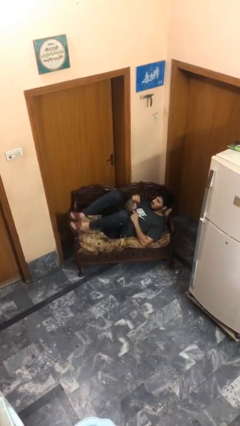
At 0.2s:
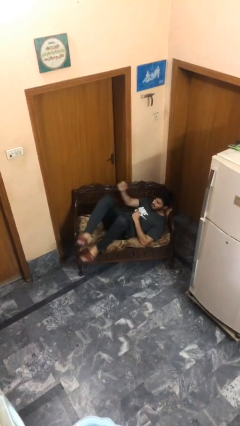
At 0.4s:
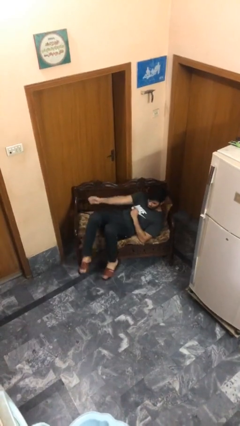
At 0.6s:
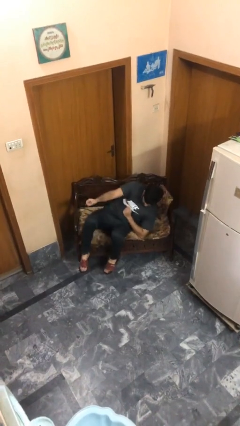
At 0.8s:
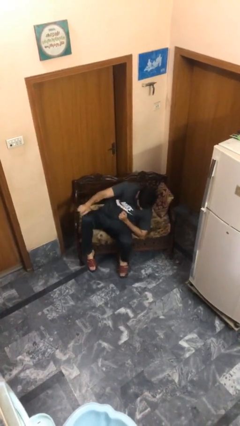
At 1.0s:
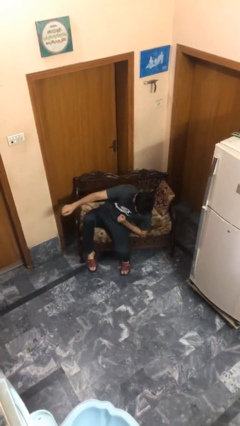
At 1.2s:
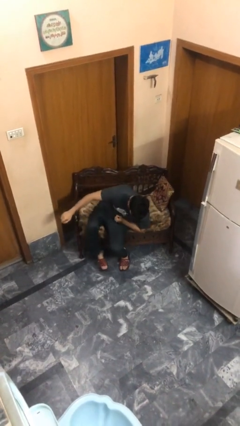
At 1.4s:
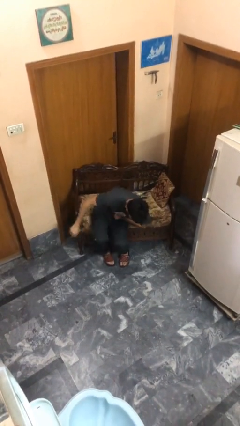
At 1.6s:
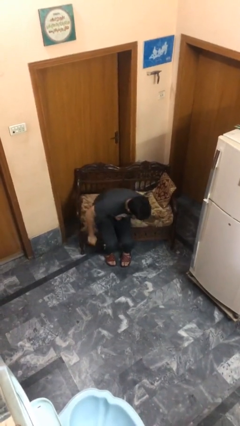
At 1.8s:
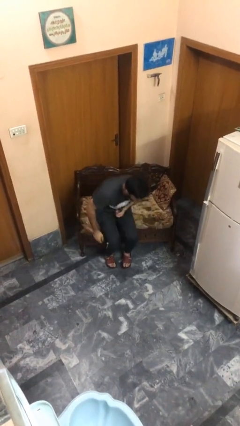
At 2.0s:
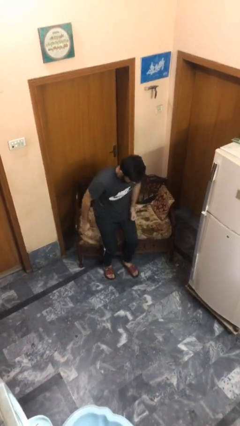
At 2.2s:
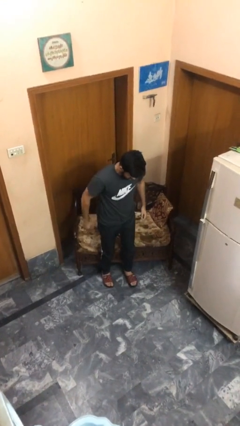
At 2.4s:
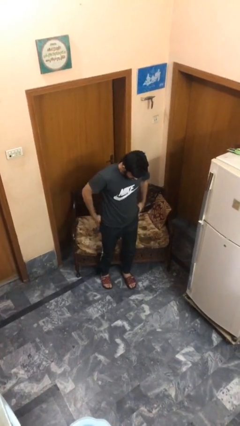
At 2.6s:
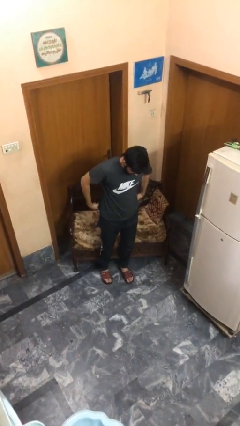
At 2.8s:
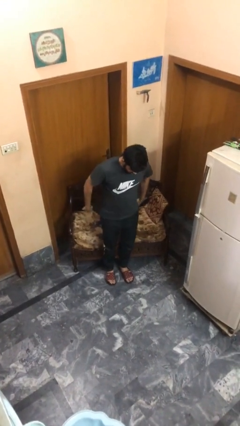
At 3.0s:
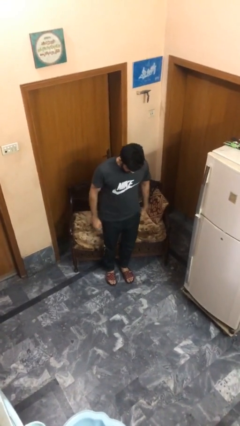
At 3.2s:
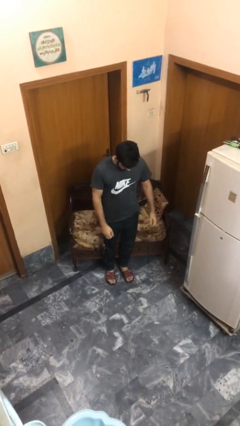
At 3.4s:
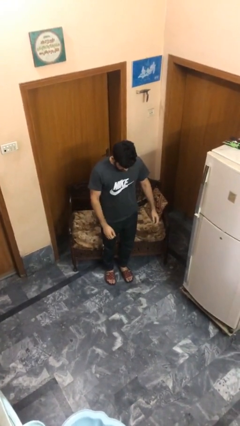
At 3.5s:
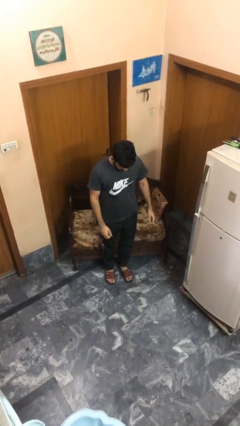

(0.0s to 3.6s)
person stands up

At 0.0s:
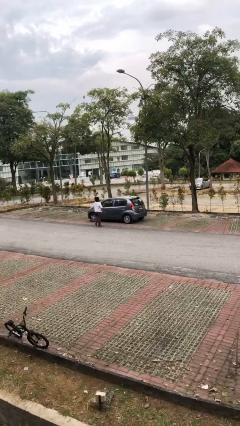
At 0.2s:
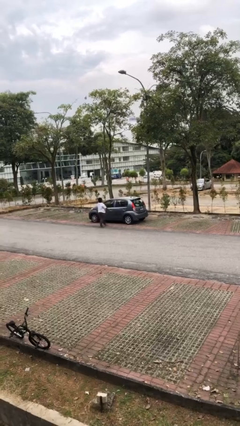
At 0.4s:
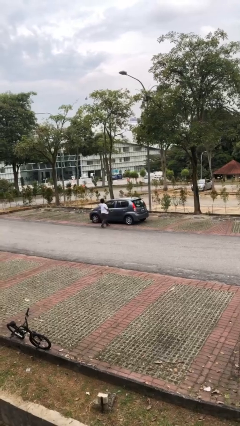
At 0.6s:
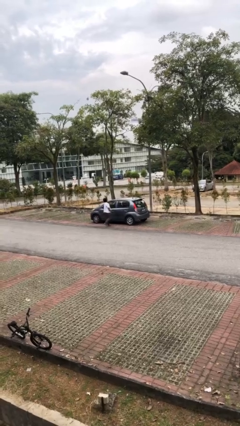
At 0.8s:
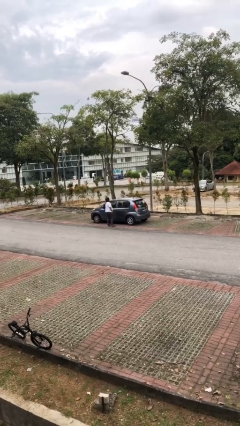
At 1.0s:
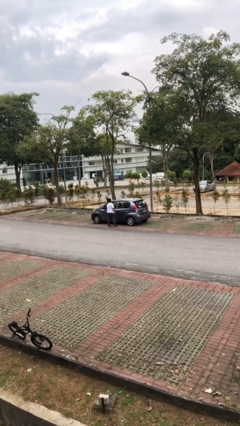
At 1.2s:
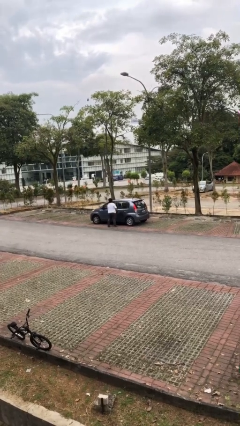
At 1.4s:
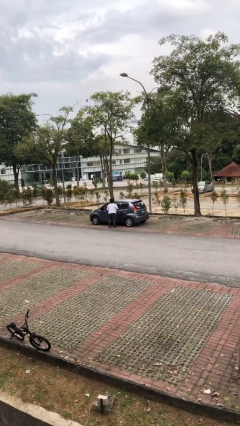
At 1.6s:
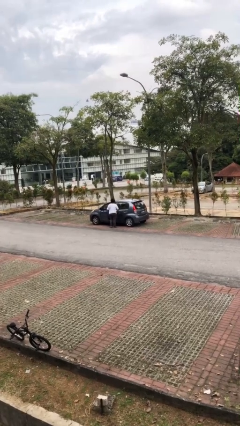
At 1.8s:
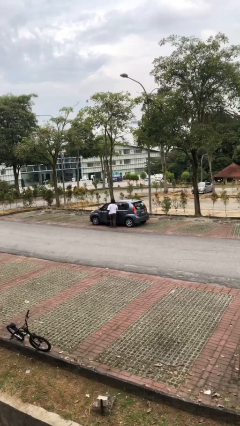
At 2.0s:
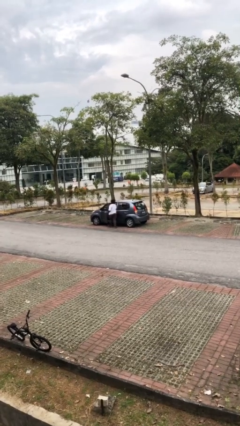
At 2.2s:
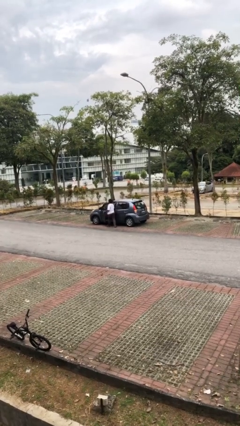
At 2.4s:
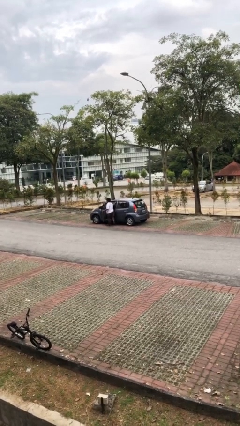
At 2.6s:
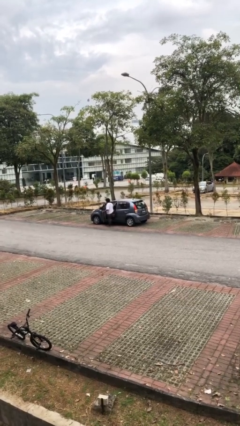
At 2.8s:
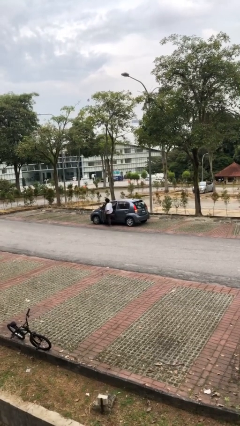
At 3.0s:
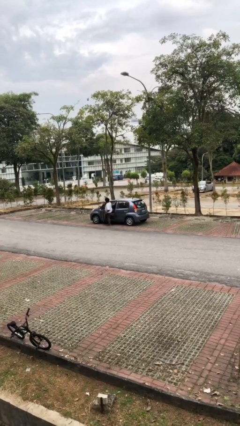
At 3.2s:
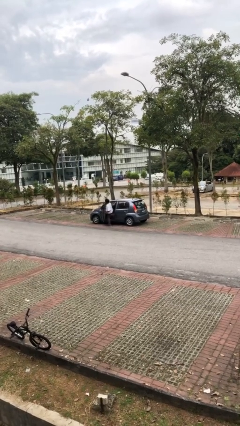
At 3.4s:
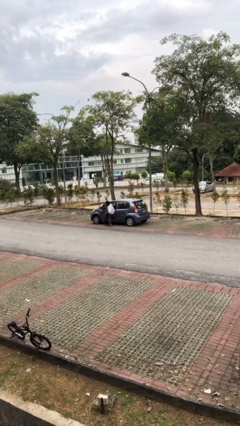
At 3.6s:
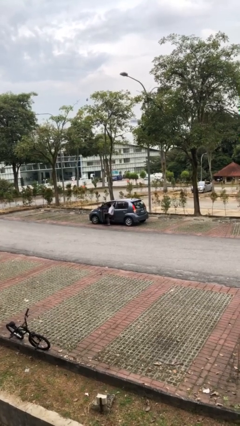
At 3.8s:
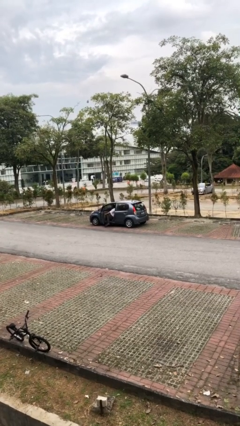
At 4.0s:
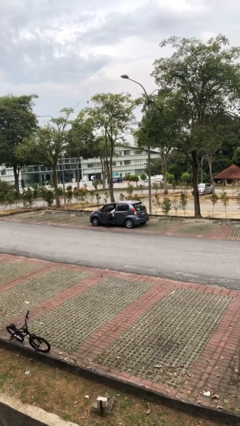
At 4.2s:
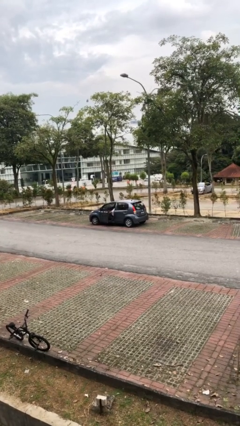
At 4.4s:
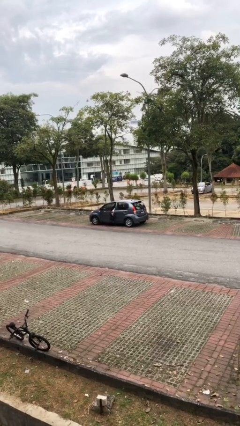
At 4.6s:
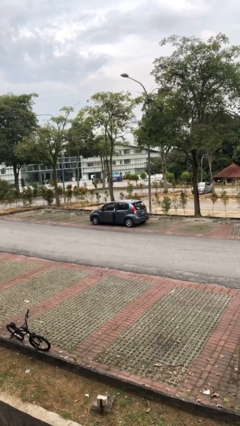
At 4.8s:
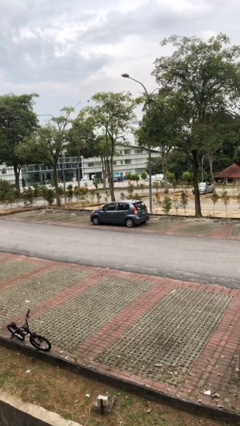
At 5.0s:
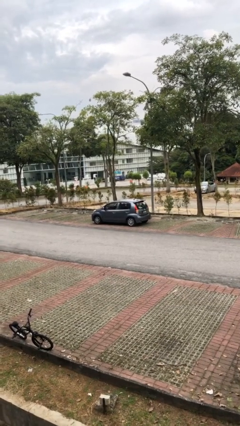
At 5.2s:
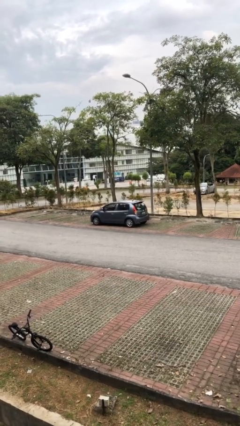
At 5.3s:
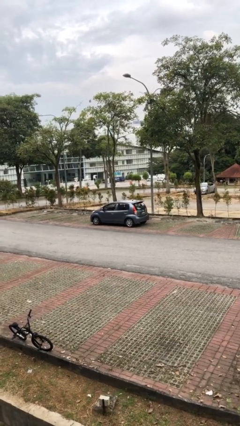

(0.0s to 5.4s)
car picks up person

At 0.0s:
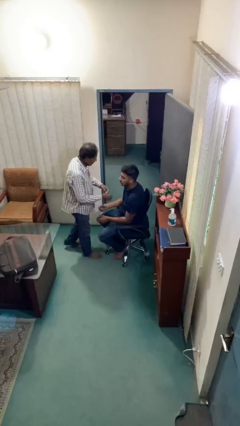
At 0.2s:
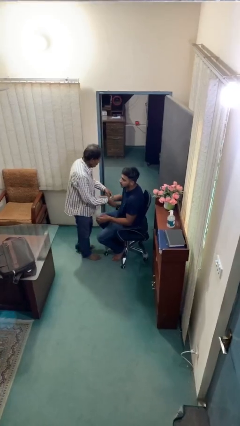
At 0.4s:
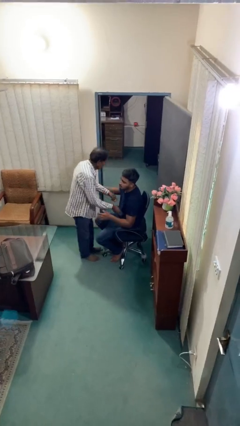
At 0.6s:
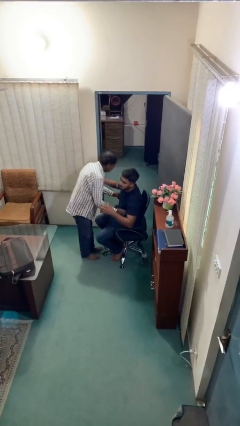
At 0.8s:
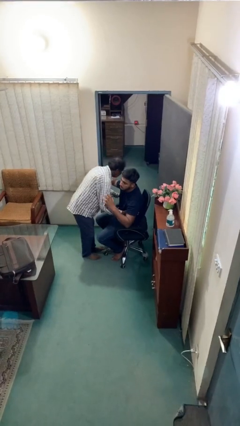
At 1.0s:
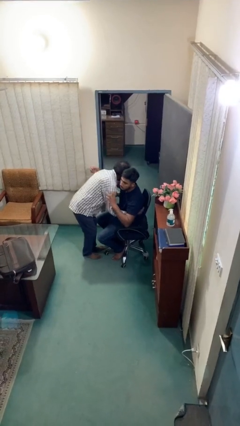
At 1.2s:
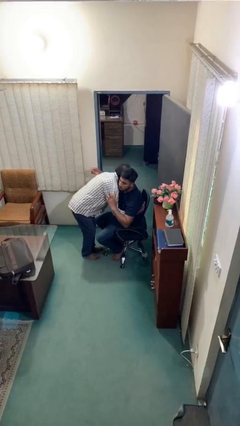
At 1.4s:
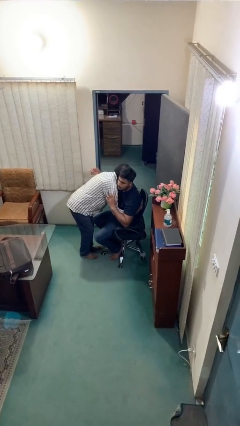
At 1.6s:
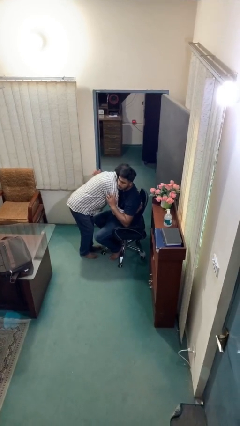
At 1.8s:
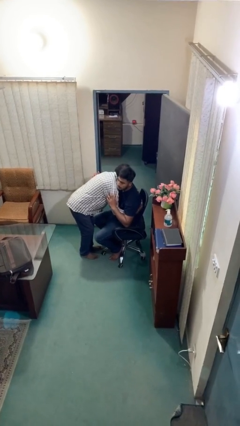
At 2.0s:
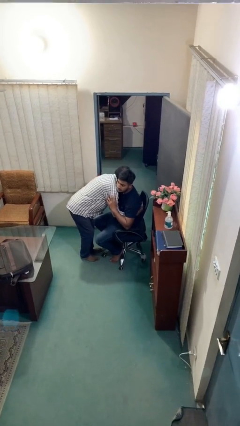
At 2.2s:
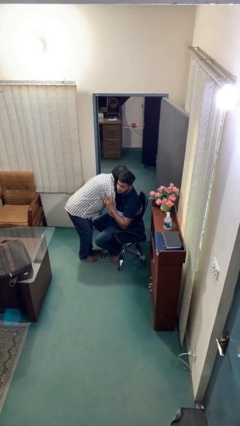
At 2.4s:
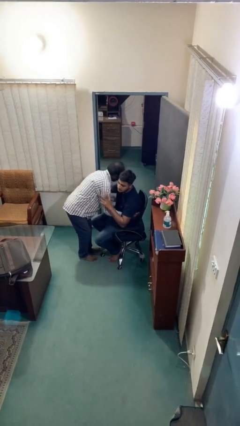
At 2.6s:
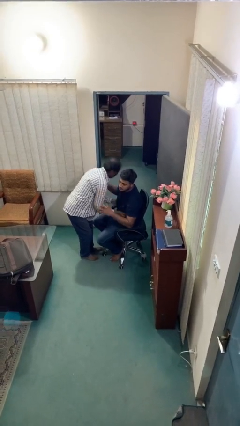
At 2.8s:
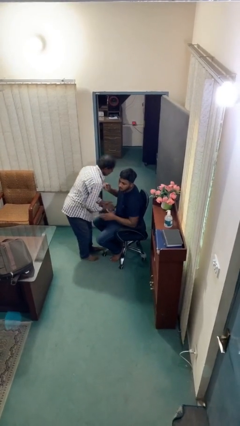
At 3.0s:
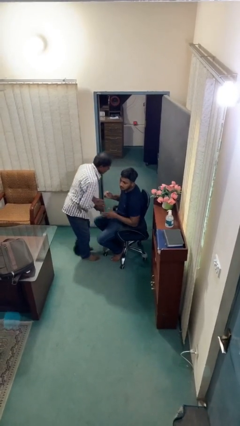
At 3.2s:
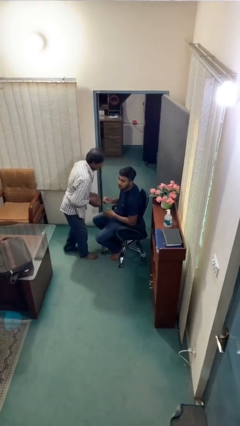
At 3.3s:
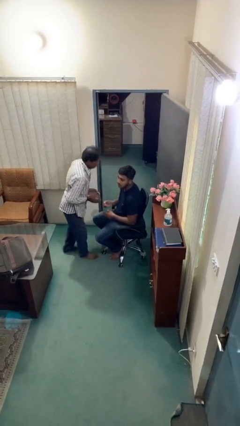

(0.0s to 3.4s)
person embraces person

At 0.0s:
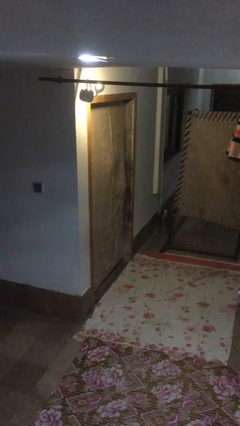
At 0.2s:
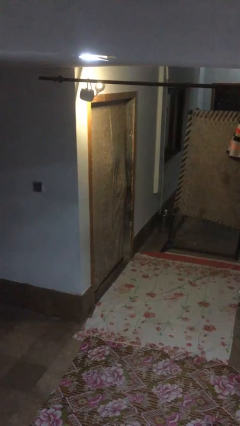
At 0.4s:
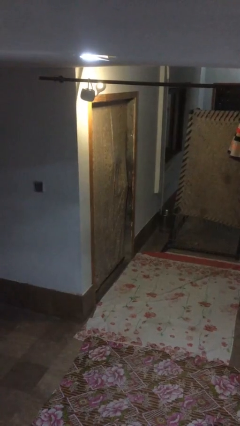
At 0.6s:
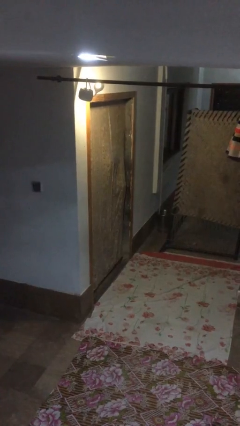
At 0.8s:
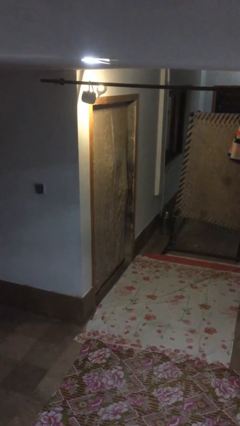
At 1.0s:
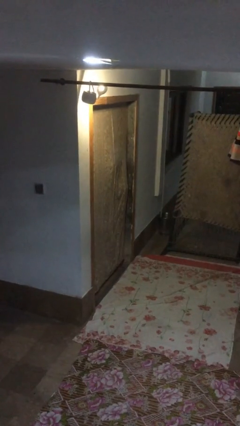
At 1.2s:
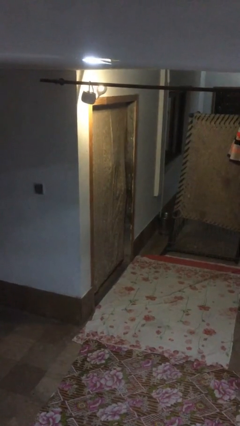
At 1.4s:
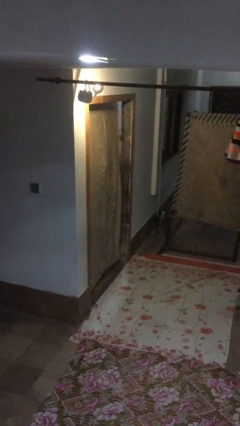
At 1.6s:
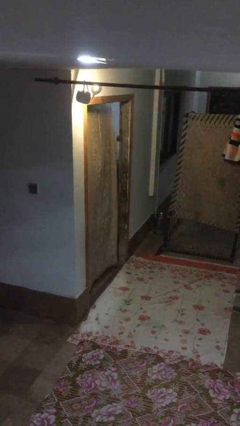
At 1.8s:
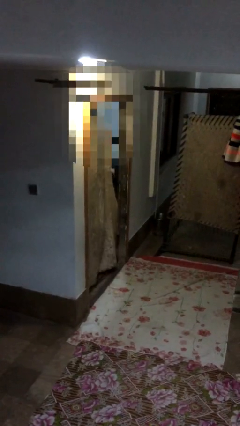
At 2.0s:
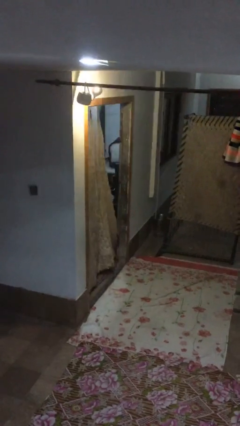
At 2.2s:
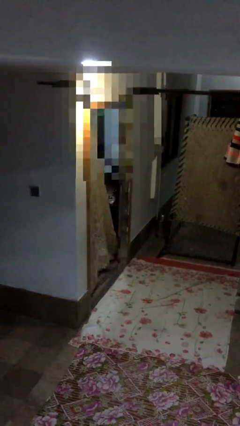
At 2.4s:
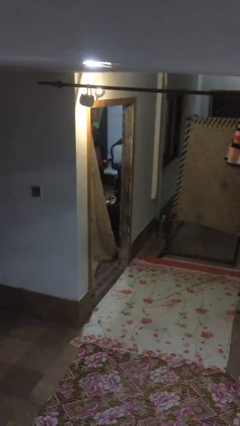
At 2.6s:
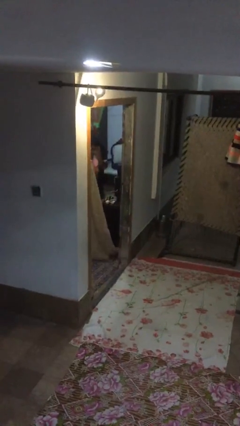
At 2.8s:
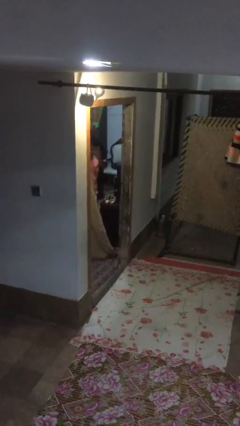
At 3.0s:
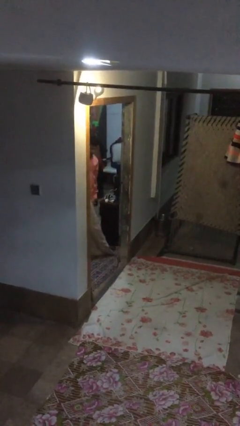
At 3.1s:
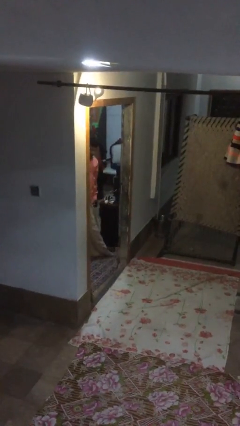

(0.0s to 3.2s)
person opens facility door

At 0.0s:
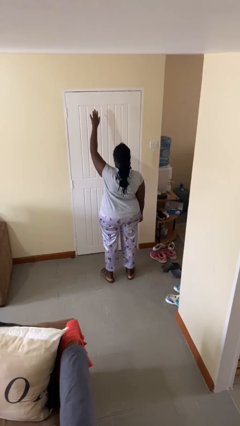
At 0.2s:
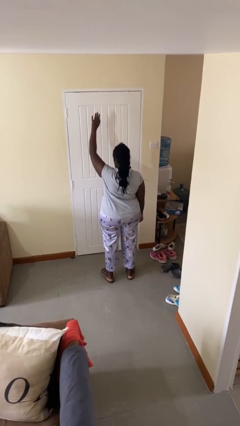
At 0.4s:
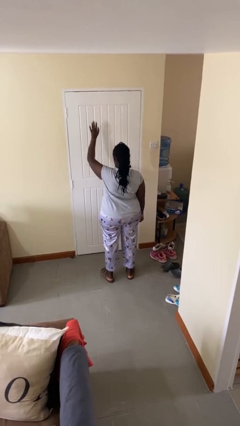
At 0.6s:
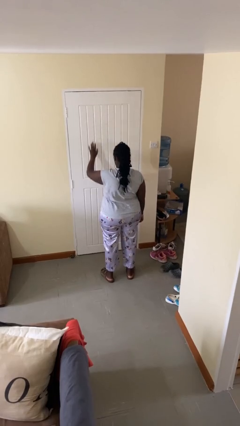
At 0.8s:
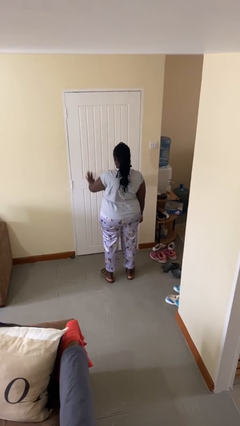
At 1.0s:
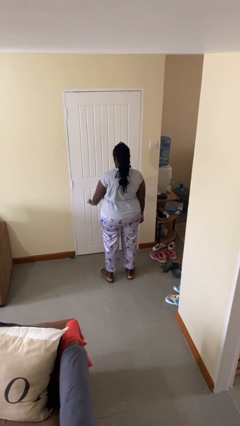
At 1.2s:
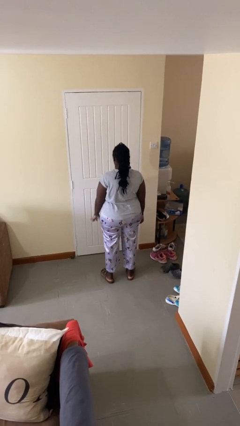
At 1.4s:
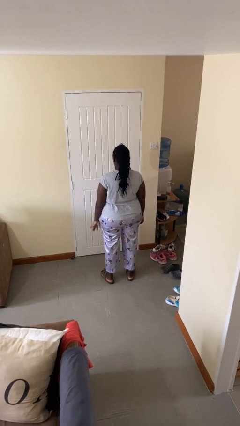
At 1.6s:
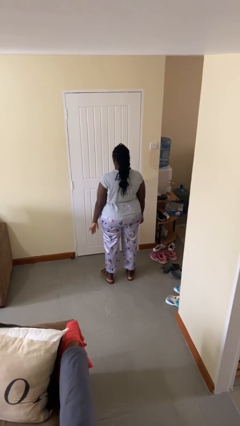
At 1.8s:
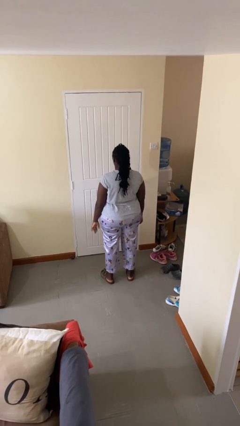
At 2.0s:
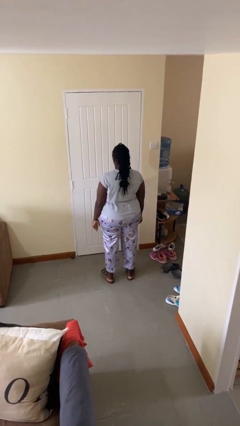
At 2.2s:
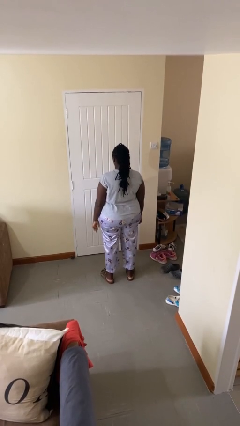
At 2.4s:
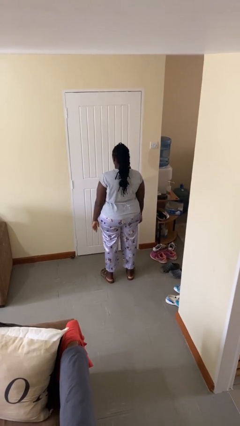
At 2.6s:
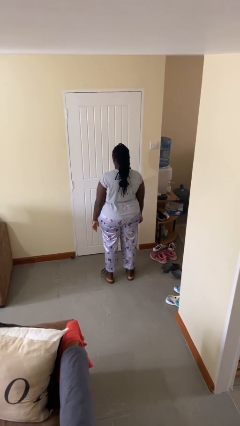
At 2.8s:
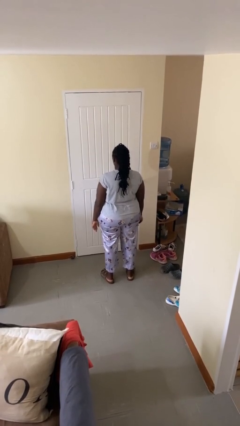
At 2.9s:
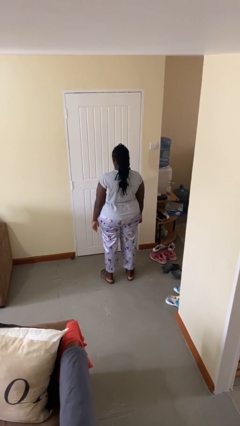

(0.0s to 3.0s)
person gestures swipe down
